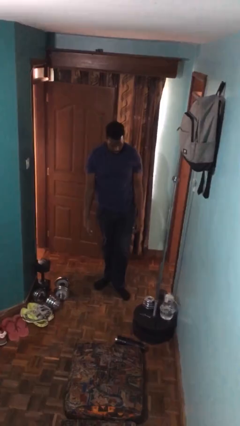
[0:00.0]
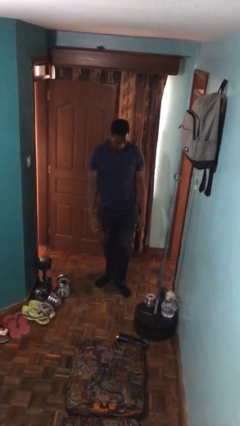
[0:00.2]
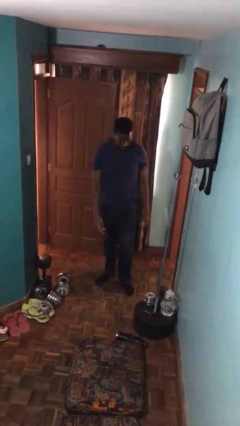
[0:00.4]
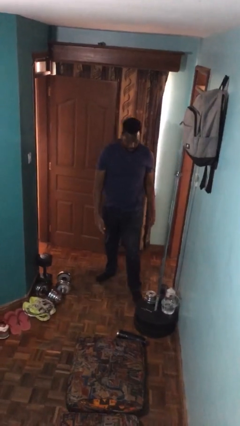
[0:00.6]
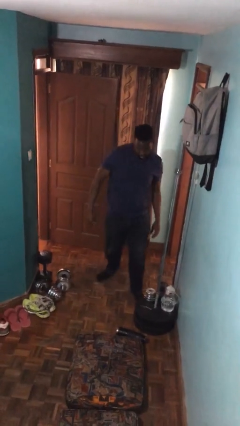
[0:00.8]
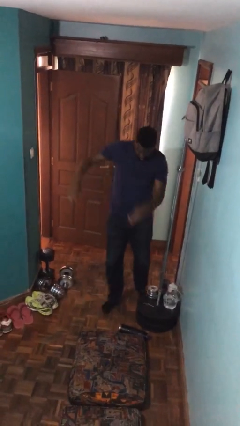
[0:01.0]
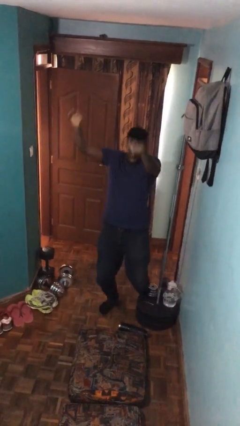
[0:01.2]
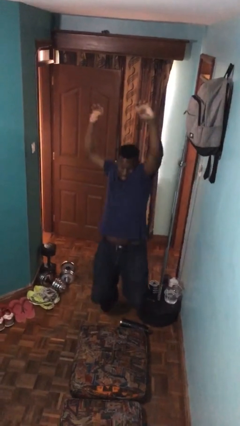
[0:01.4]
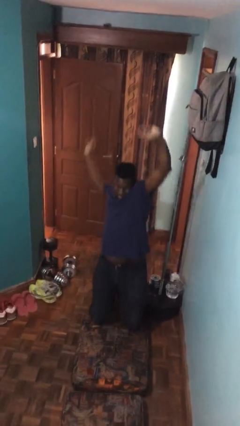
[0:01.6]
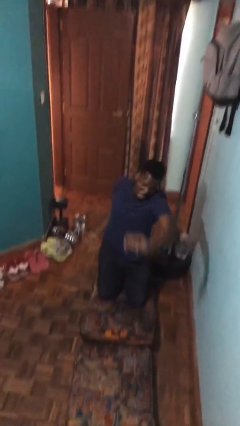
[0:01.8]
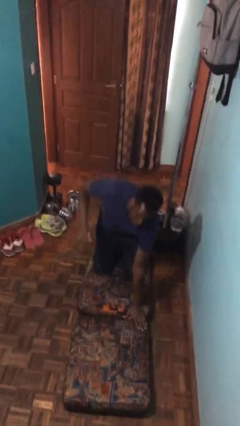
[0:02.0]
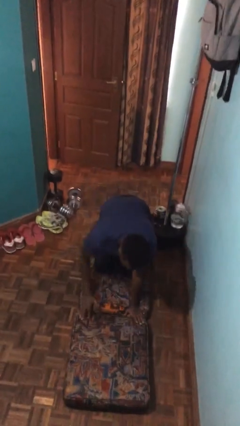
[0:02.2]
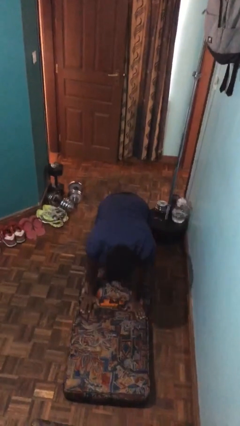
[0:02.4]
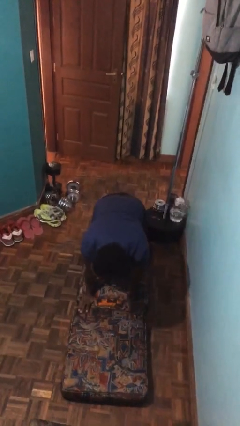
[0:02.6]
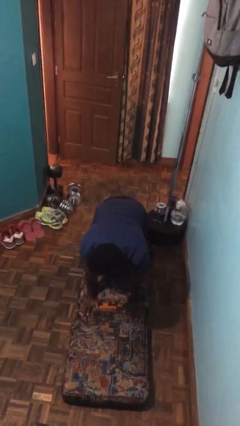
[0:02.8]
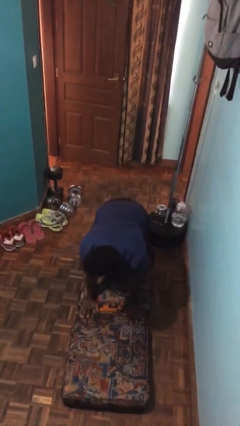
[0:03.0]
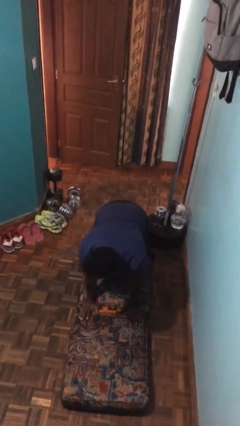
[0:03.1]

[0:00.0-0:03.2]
person trips on object on floor

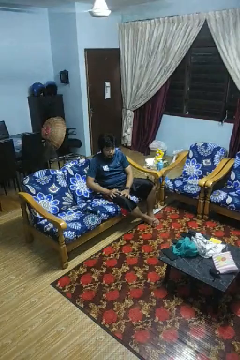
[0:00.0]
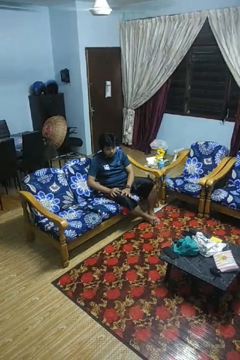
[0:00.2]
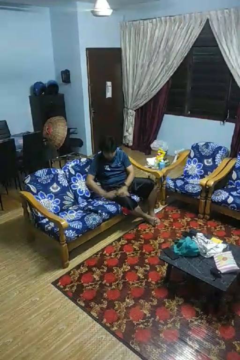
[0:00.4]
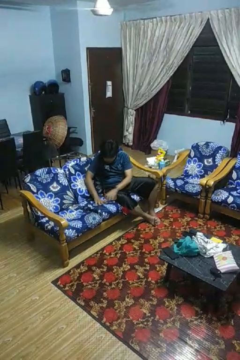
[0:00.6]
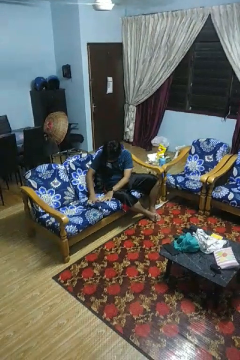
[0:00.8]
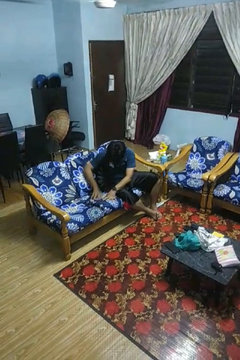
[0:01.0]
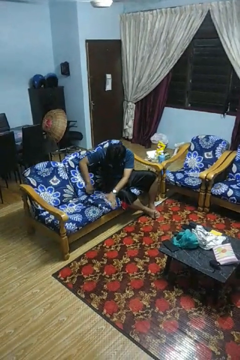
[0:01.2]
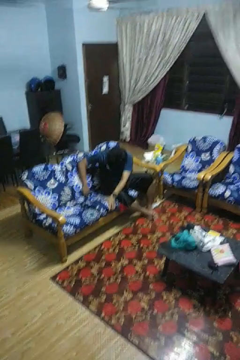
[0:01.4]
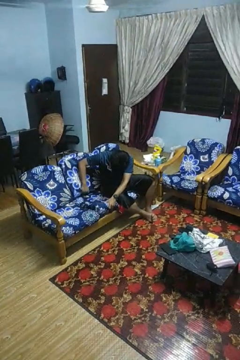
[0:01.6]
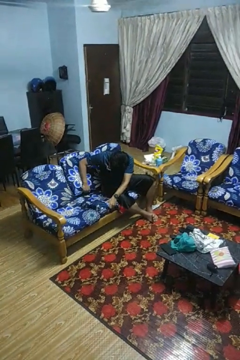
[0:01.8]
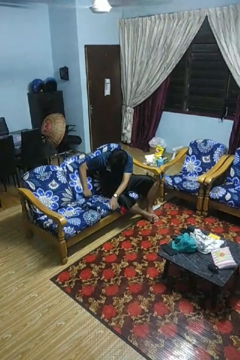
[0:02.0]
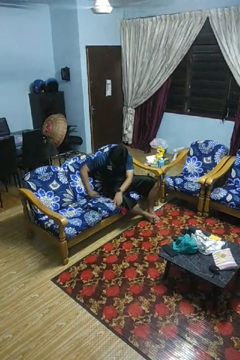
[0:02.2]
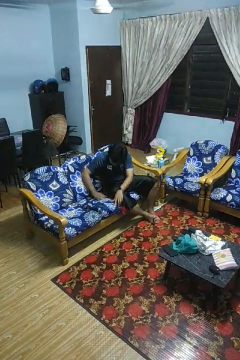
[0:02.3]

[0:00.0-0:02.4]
person searches in couch

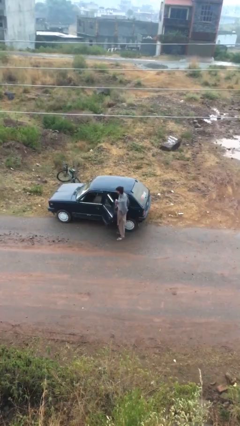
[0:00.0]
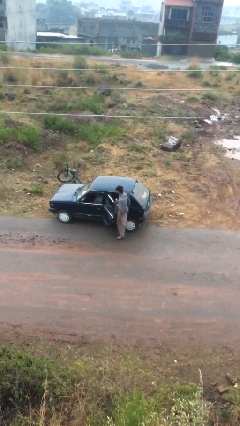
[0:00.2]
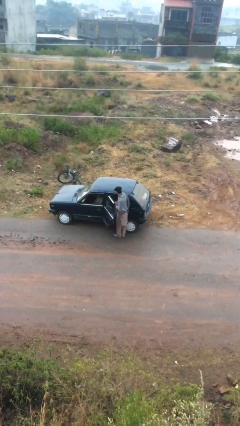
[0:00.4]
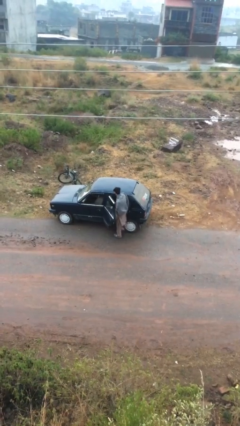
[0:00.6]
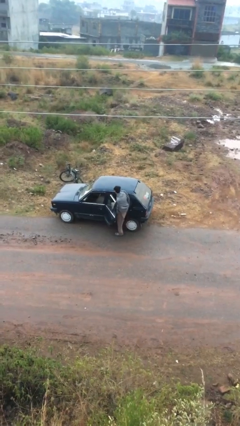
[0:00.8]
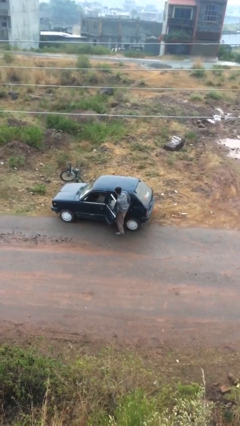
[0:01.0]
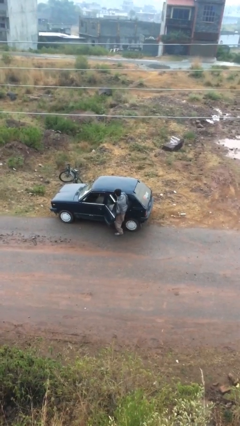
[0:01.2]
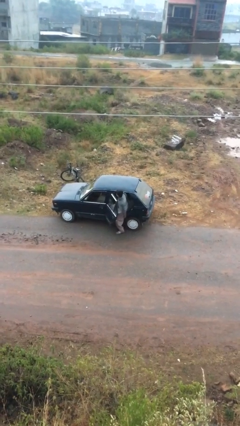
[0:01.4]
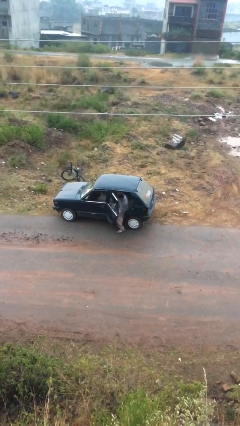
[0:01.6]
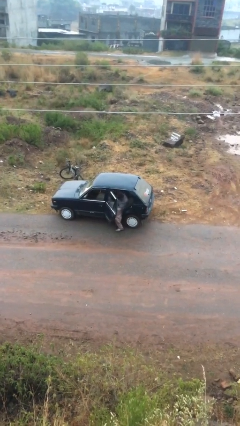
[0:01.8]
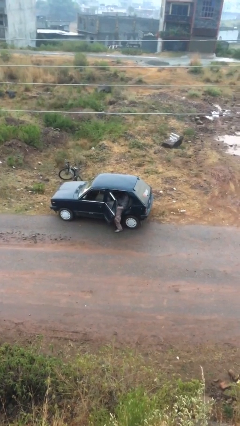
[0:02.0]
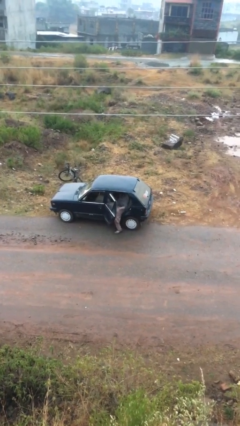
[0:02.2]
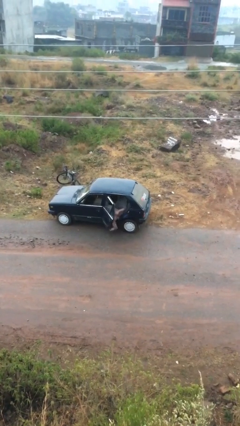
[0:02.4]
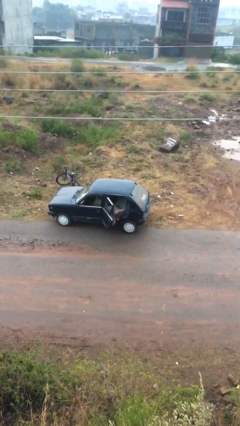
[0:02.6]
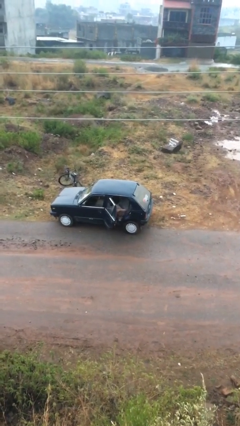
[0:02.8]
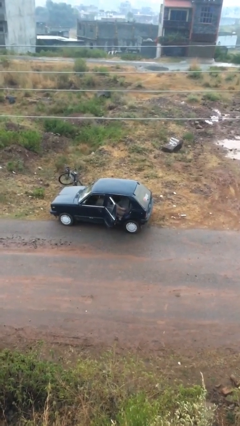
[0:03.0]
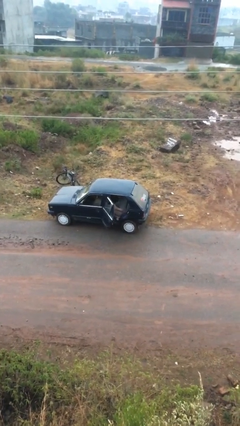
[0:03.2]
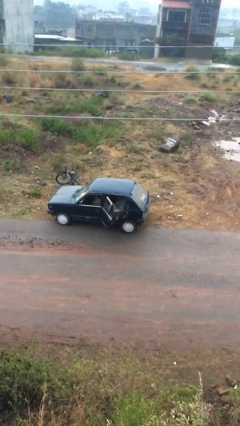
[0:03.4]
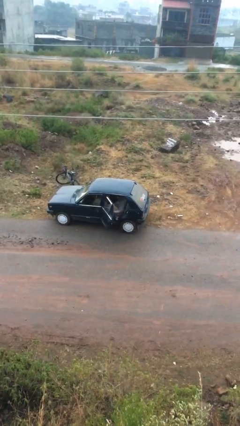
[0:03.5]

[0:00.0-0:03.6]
person enters car

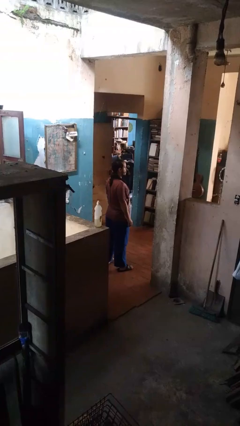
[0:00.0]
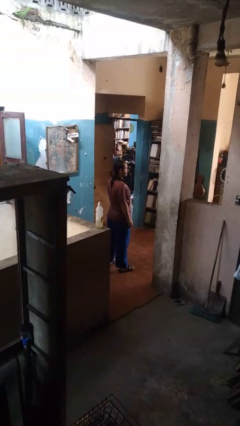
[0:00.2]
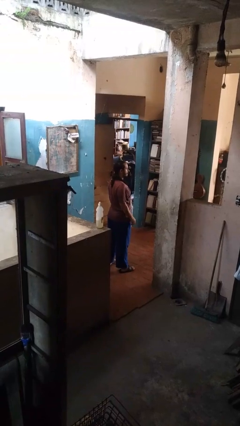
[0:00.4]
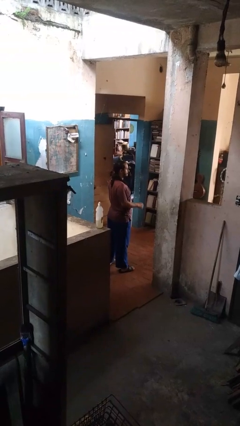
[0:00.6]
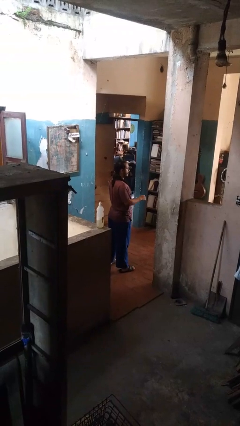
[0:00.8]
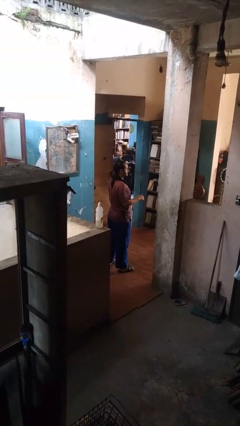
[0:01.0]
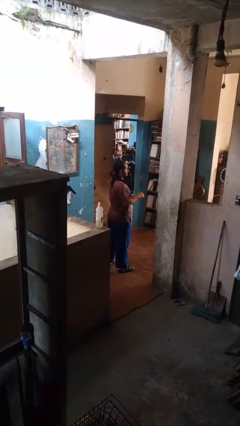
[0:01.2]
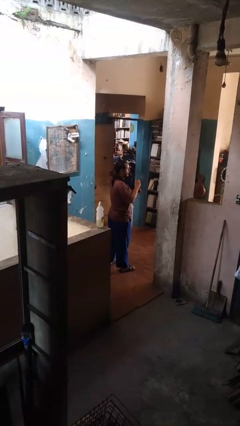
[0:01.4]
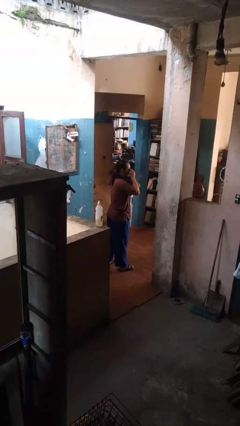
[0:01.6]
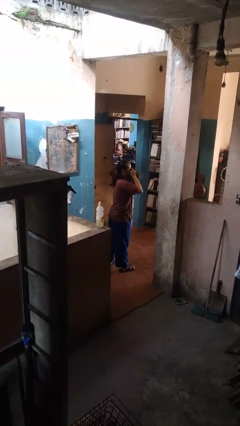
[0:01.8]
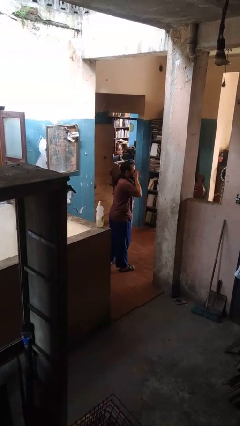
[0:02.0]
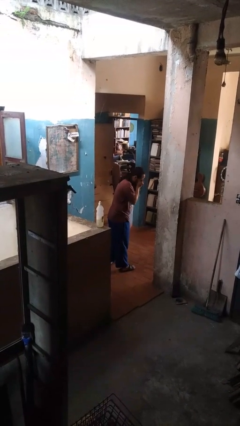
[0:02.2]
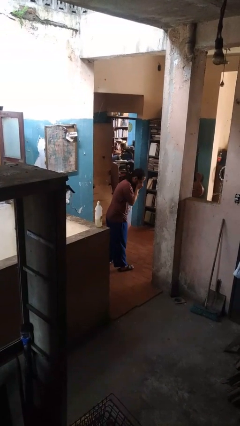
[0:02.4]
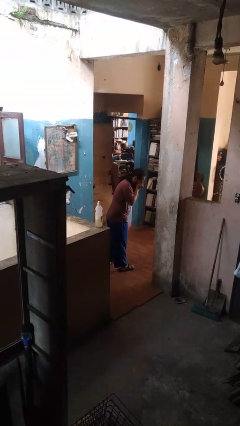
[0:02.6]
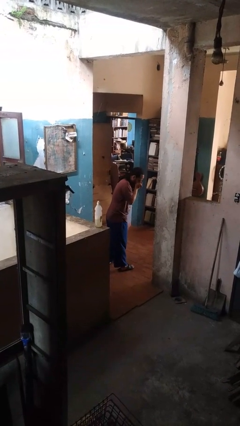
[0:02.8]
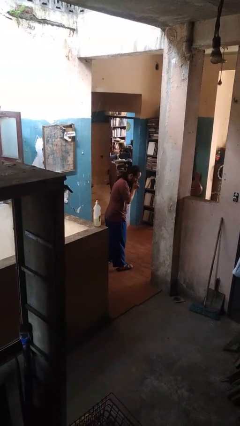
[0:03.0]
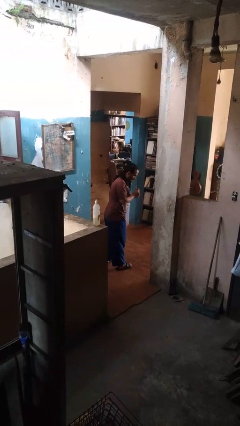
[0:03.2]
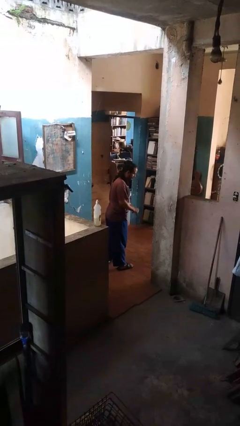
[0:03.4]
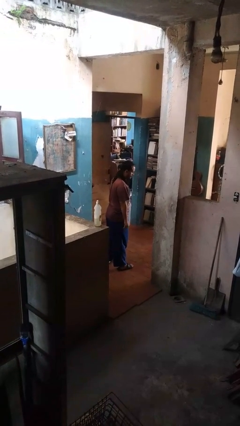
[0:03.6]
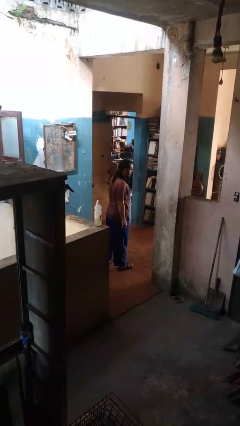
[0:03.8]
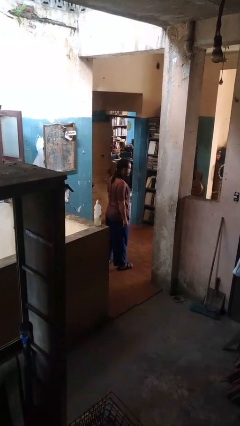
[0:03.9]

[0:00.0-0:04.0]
person sneezes into hand

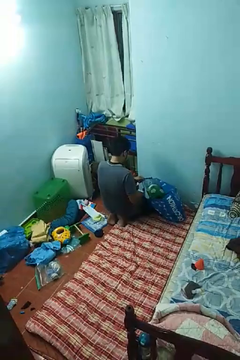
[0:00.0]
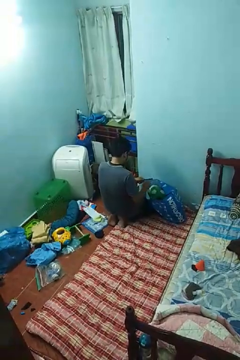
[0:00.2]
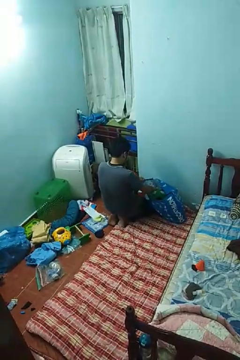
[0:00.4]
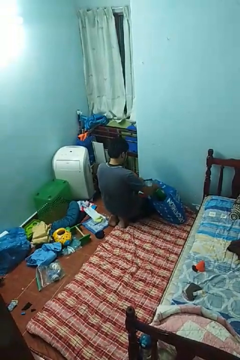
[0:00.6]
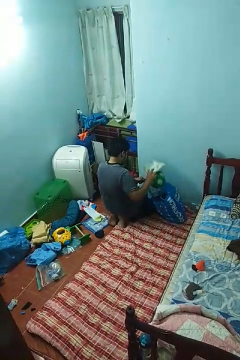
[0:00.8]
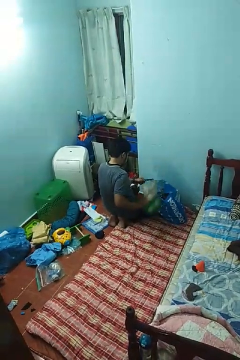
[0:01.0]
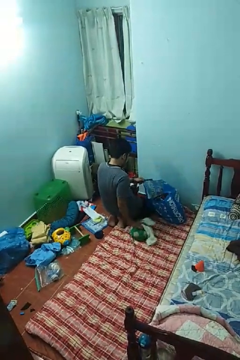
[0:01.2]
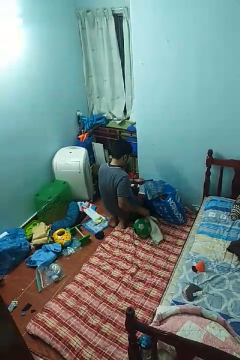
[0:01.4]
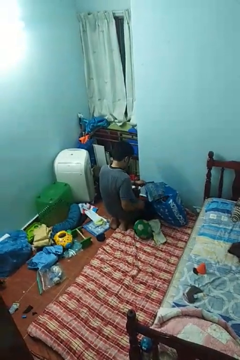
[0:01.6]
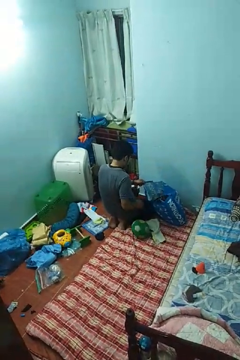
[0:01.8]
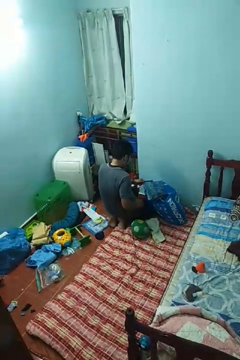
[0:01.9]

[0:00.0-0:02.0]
person takes object from bag

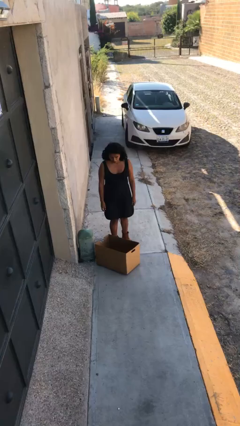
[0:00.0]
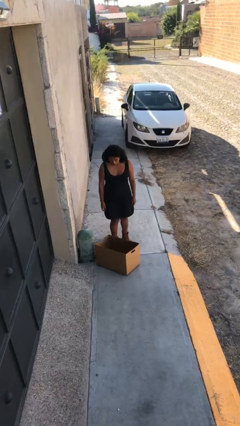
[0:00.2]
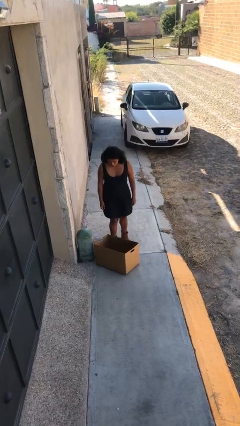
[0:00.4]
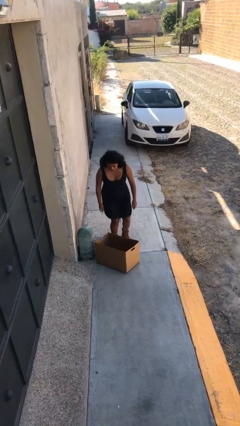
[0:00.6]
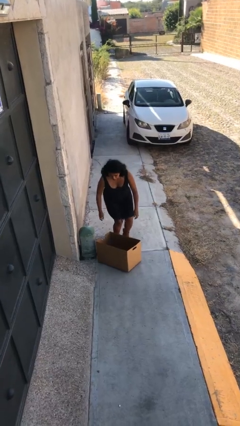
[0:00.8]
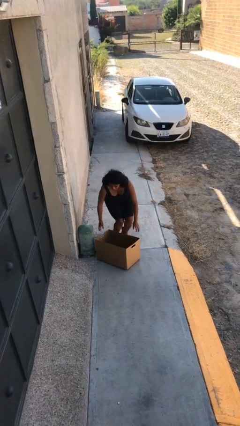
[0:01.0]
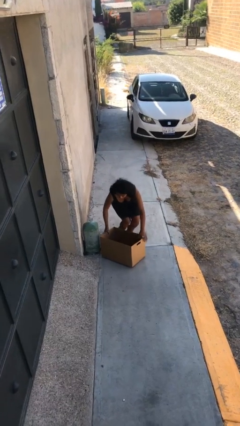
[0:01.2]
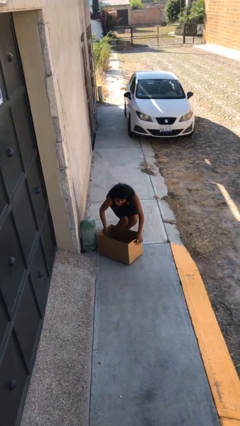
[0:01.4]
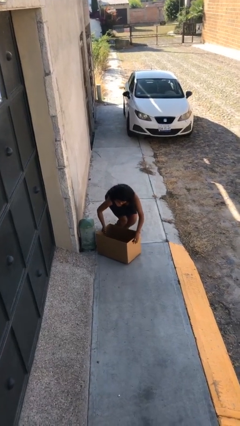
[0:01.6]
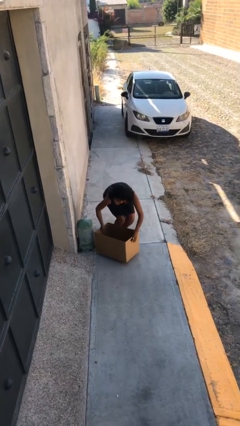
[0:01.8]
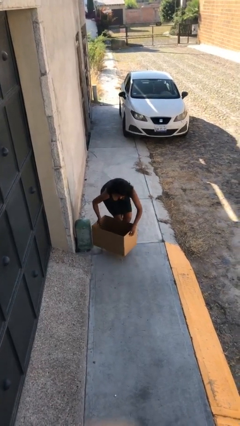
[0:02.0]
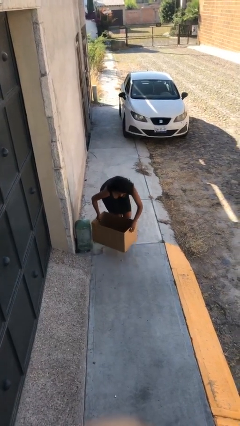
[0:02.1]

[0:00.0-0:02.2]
person picks up object from floor

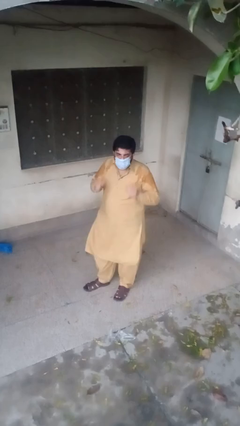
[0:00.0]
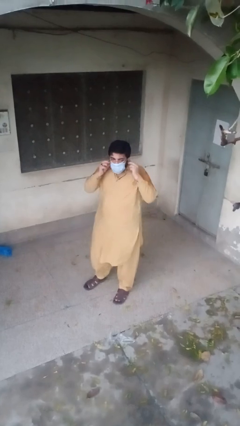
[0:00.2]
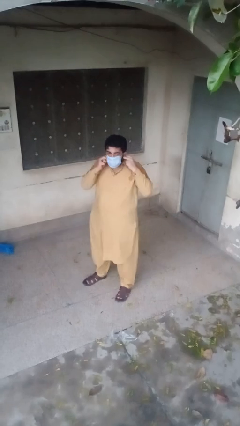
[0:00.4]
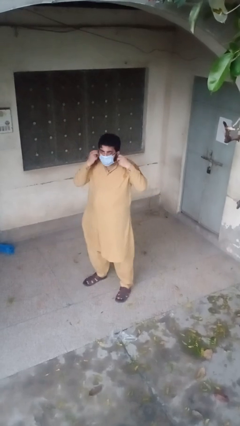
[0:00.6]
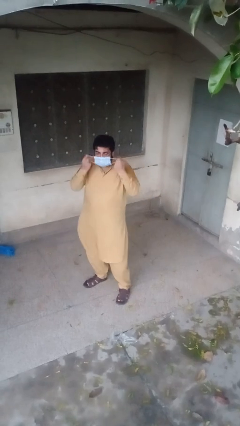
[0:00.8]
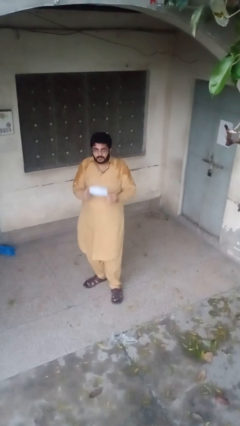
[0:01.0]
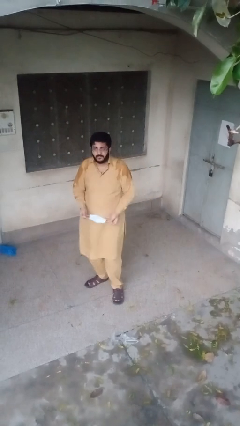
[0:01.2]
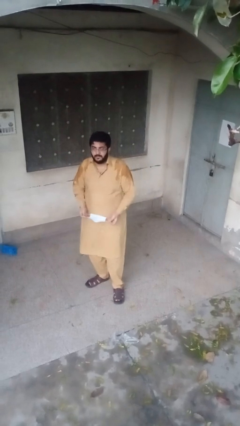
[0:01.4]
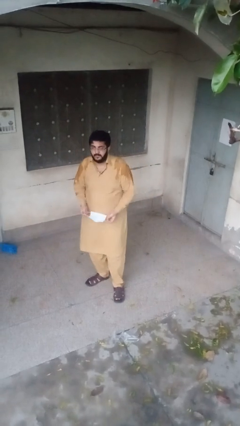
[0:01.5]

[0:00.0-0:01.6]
person takes off facemask
